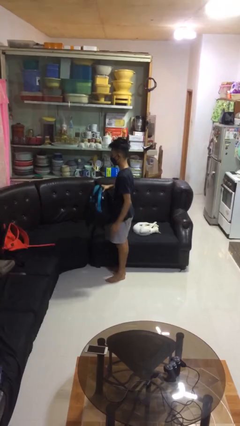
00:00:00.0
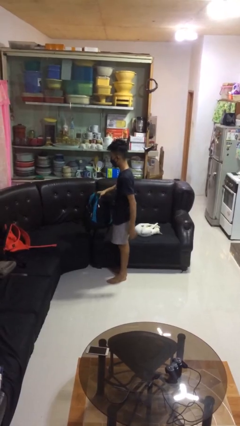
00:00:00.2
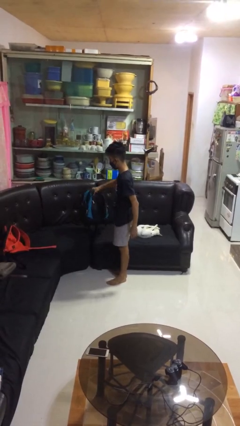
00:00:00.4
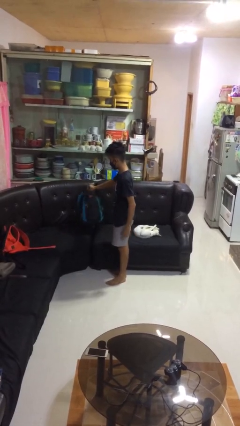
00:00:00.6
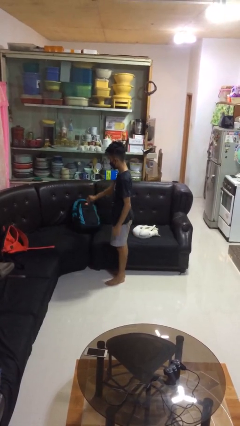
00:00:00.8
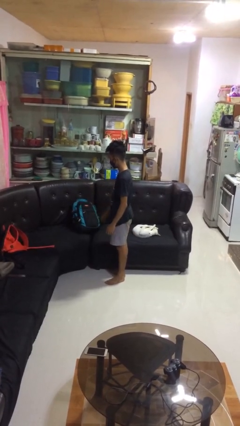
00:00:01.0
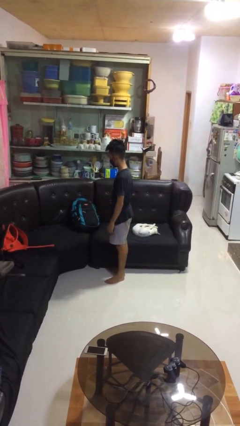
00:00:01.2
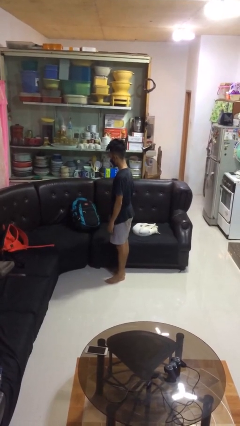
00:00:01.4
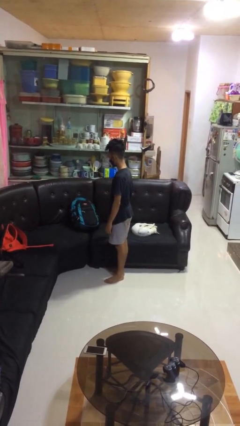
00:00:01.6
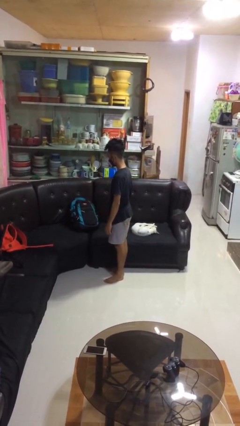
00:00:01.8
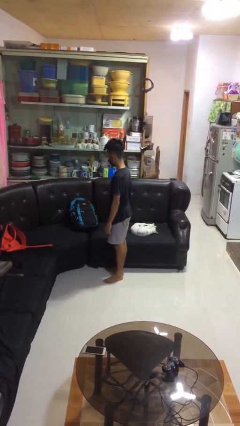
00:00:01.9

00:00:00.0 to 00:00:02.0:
person puts down object on couch

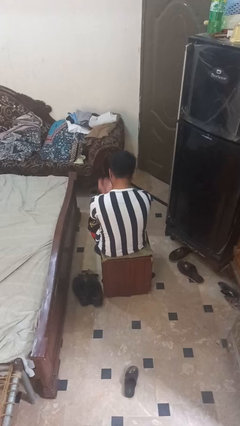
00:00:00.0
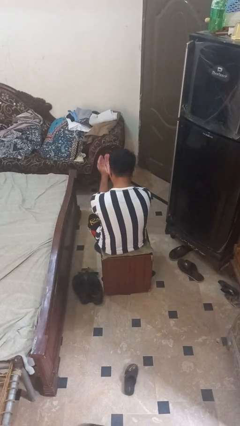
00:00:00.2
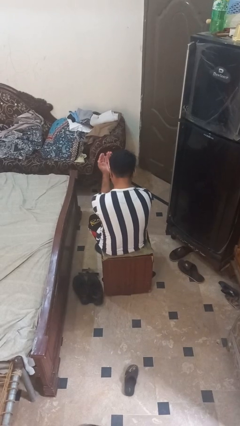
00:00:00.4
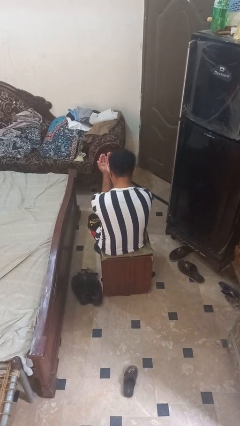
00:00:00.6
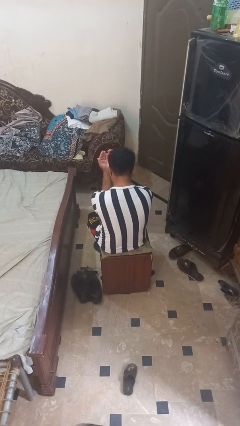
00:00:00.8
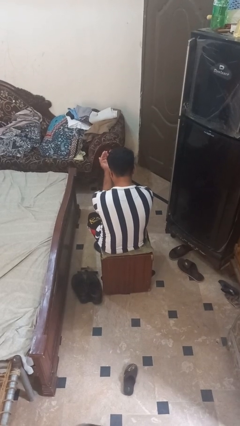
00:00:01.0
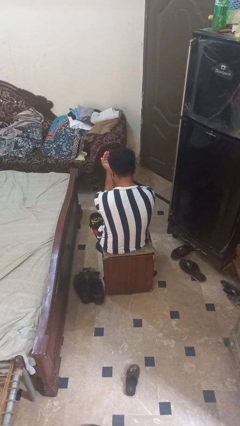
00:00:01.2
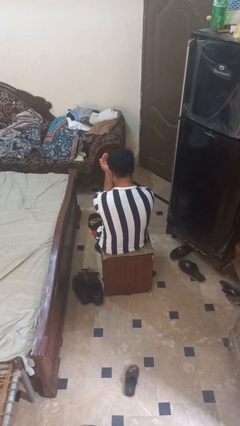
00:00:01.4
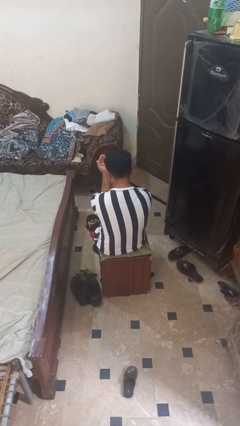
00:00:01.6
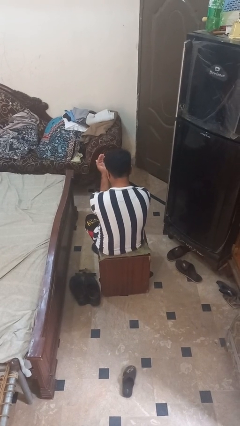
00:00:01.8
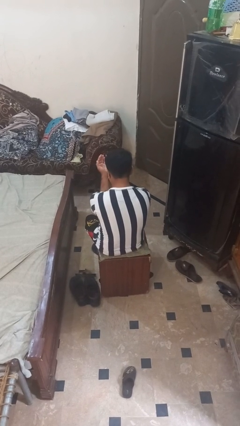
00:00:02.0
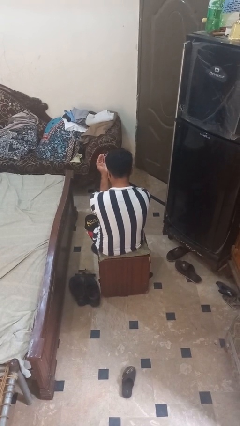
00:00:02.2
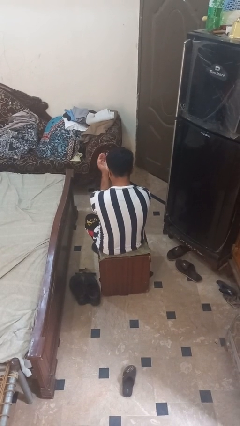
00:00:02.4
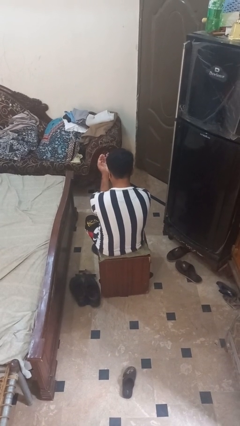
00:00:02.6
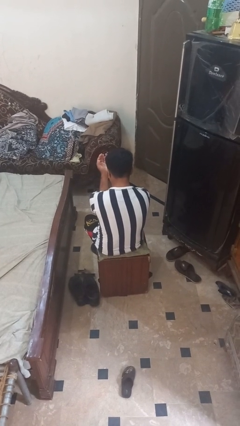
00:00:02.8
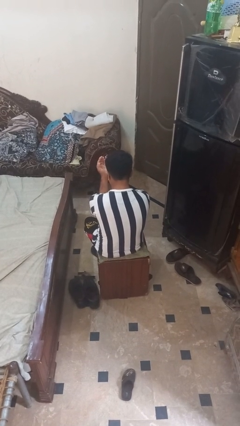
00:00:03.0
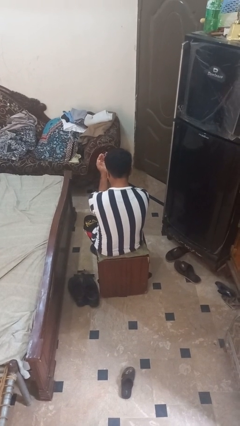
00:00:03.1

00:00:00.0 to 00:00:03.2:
person prays

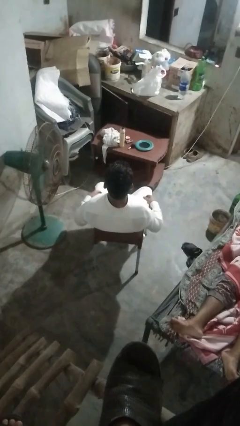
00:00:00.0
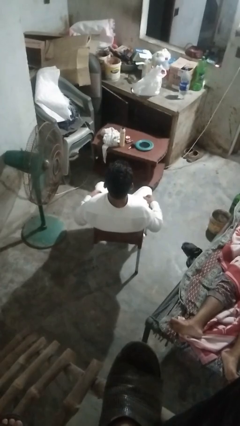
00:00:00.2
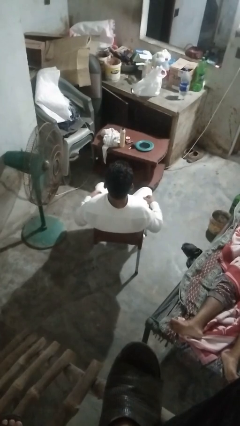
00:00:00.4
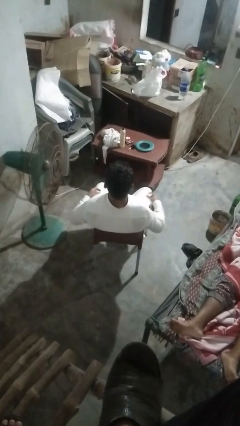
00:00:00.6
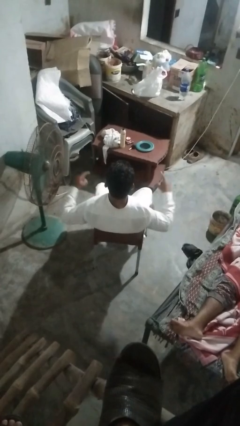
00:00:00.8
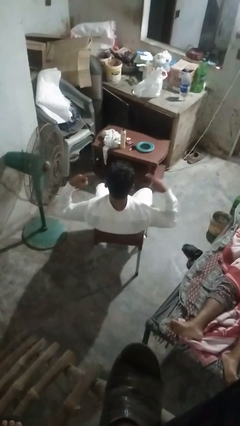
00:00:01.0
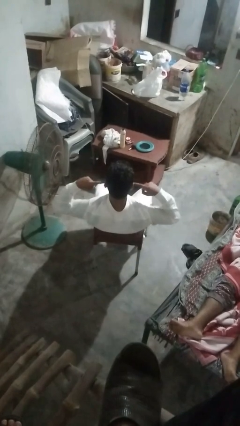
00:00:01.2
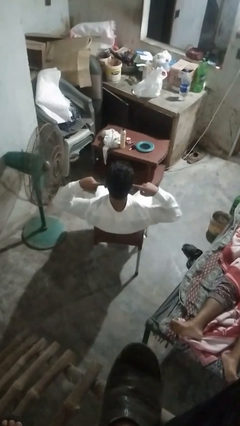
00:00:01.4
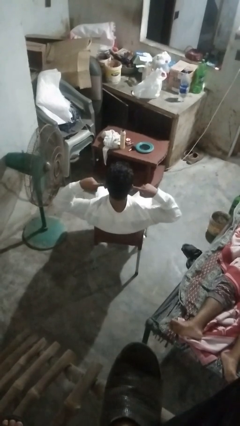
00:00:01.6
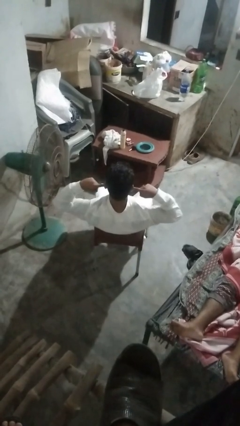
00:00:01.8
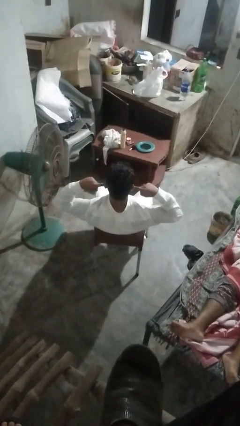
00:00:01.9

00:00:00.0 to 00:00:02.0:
person puts fingers in ear

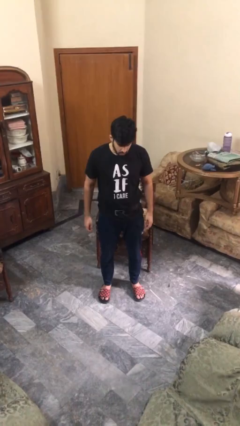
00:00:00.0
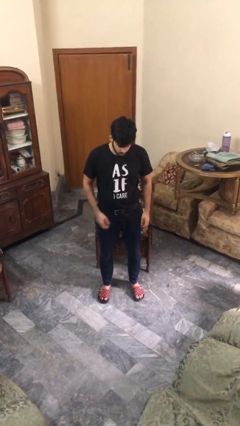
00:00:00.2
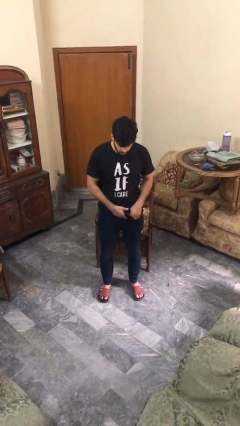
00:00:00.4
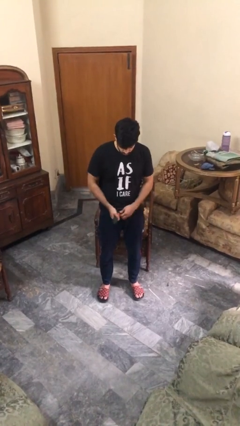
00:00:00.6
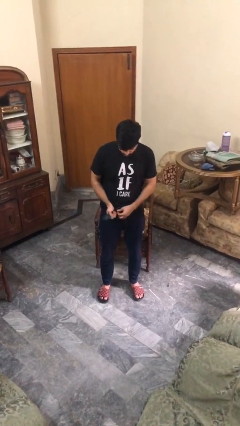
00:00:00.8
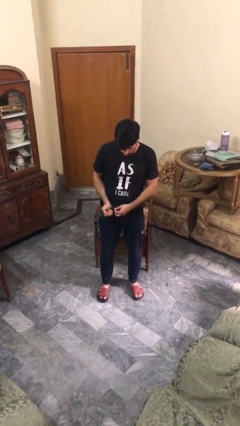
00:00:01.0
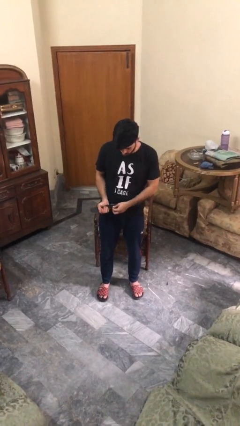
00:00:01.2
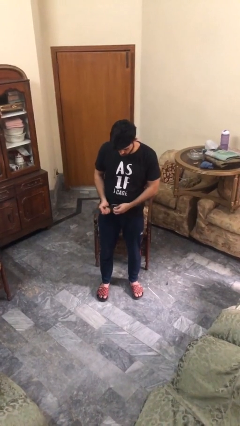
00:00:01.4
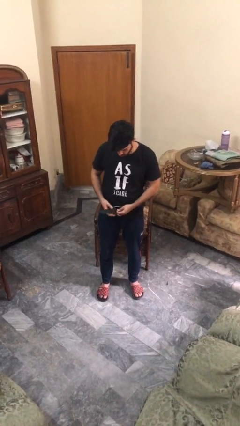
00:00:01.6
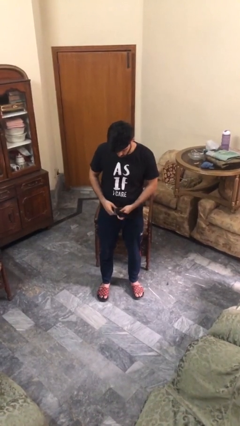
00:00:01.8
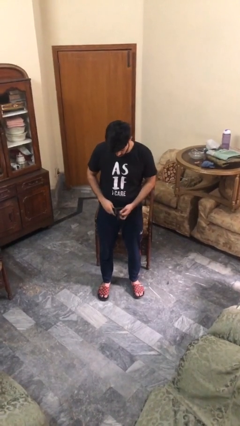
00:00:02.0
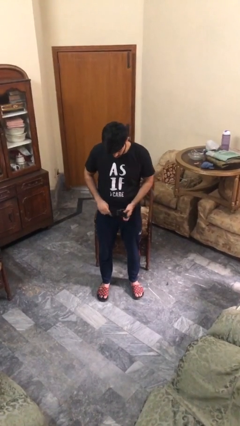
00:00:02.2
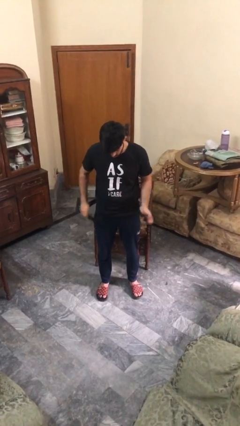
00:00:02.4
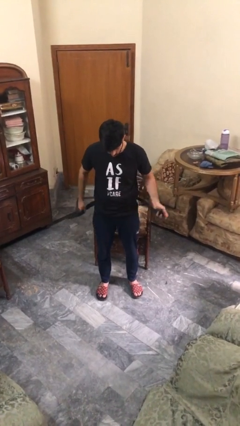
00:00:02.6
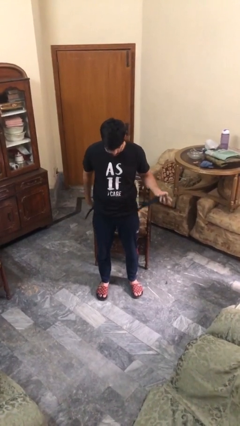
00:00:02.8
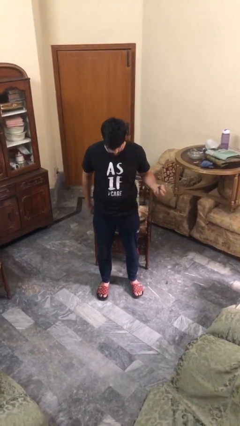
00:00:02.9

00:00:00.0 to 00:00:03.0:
person takes off belt

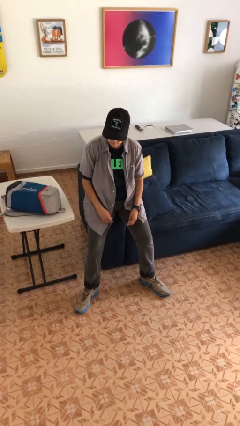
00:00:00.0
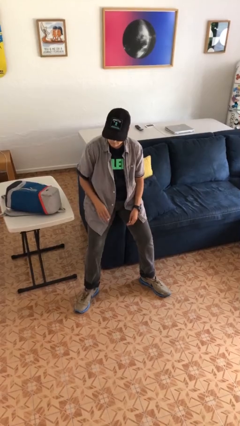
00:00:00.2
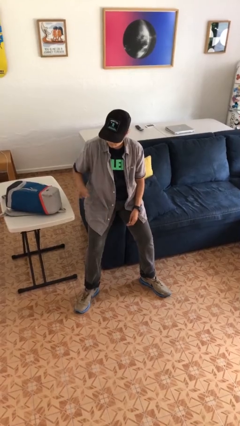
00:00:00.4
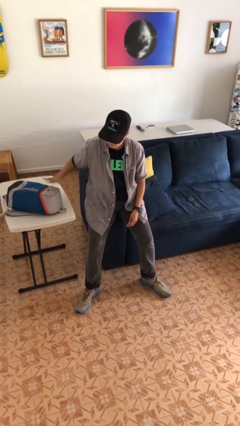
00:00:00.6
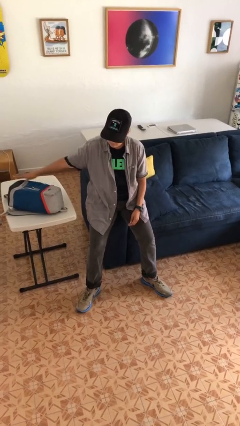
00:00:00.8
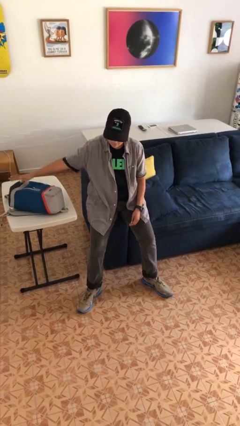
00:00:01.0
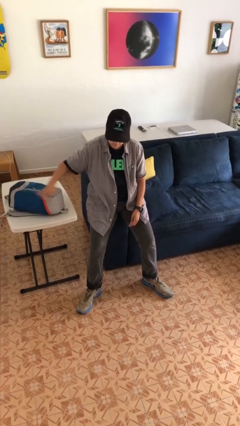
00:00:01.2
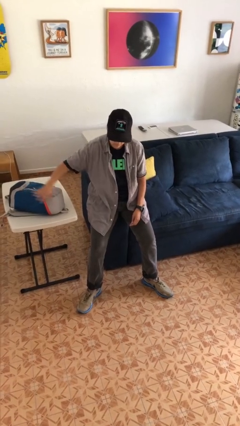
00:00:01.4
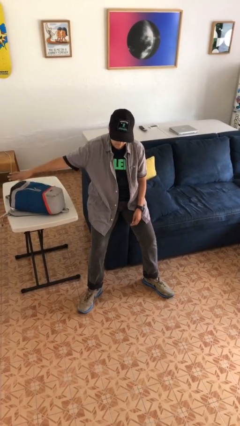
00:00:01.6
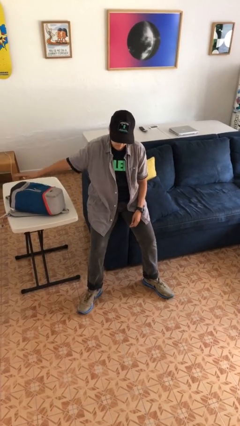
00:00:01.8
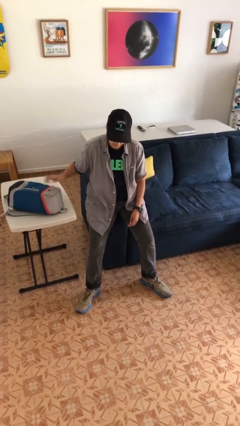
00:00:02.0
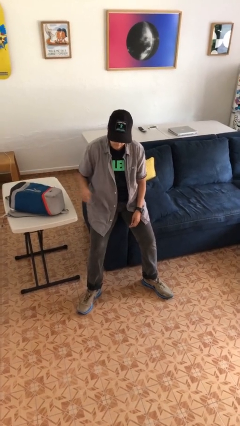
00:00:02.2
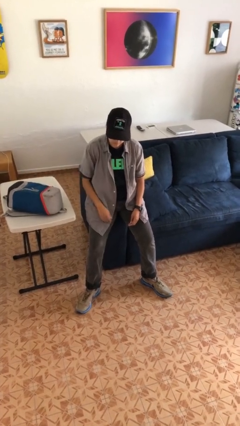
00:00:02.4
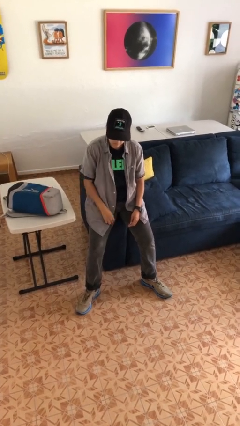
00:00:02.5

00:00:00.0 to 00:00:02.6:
person waves hand over object

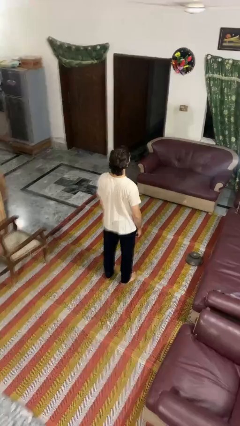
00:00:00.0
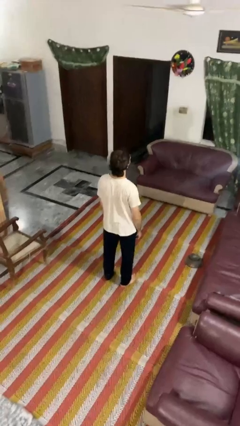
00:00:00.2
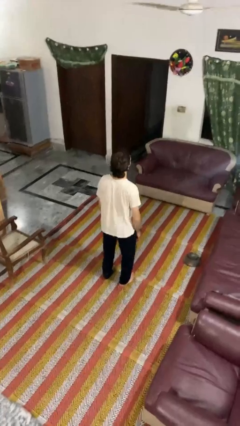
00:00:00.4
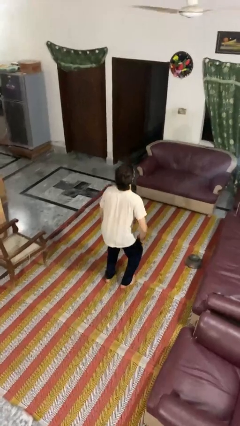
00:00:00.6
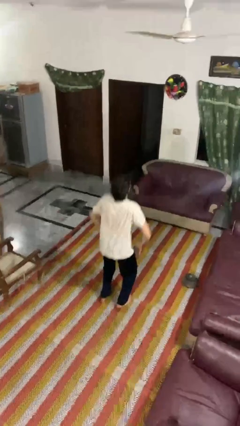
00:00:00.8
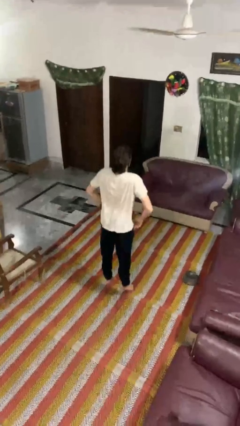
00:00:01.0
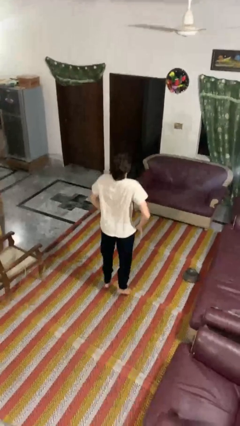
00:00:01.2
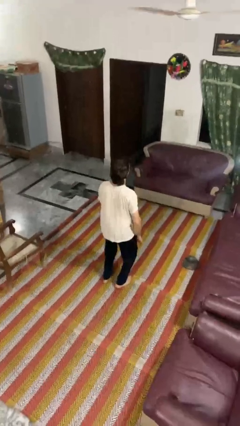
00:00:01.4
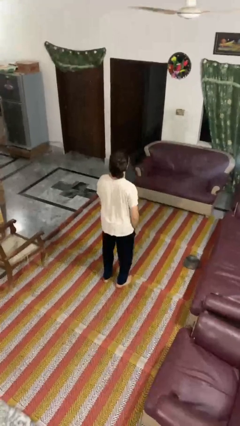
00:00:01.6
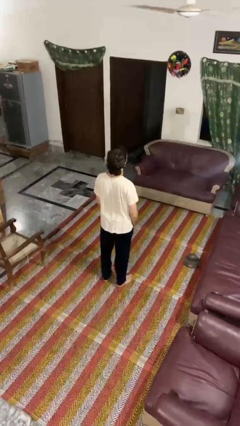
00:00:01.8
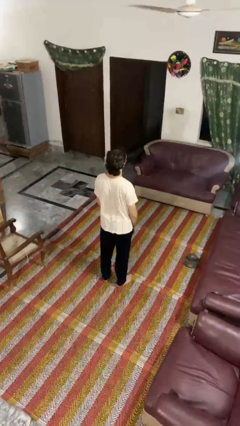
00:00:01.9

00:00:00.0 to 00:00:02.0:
person jumps

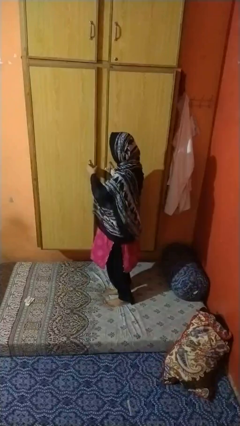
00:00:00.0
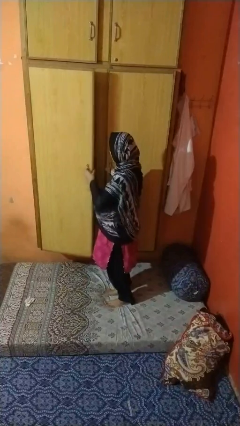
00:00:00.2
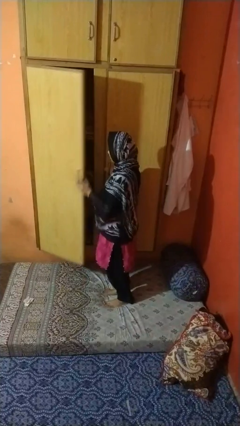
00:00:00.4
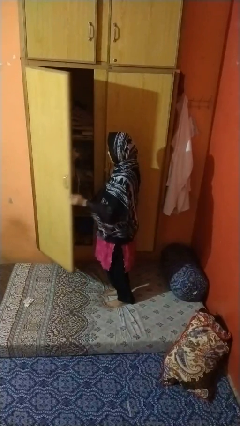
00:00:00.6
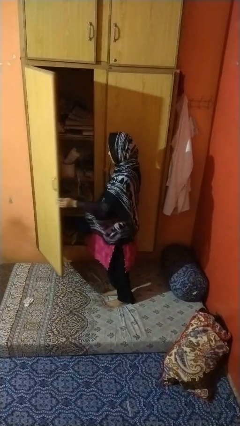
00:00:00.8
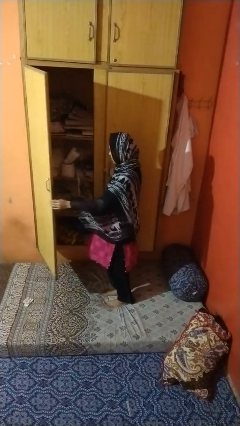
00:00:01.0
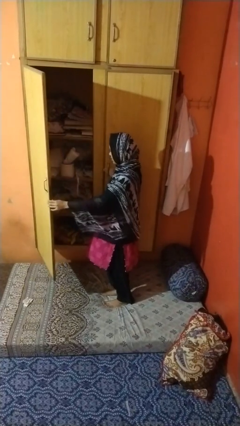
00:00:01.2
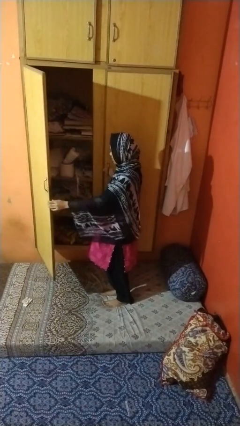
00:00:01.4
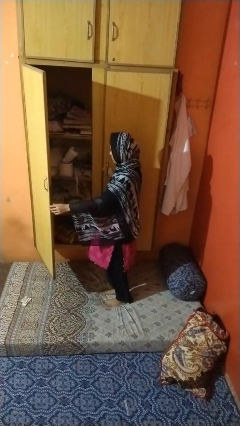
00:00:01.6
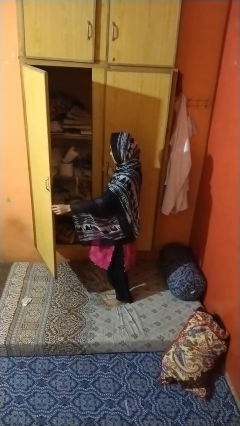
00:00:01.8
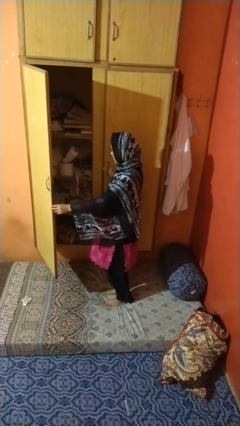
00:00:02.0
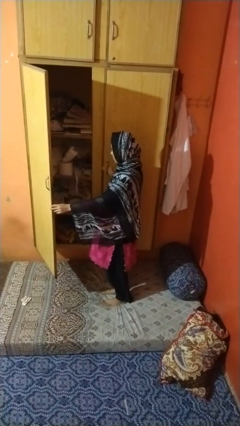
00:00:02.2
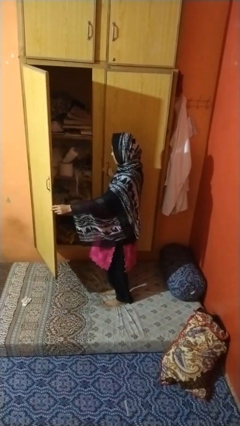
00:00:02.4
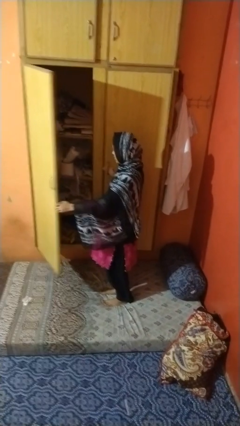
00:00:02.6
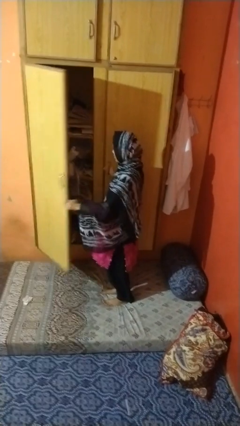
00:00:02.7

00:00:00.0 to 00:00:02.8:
person opens closet door
